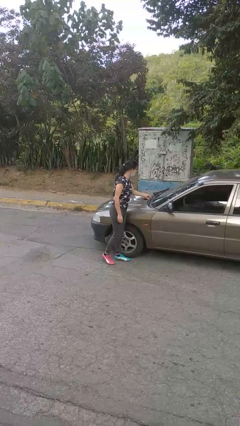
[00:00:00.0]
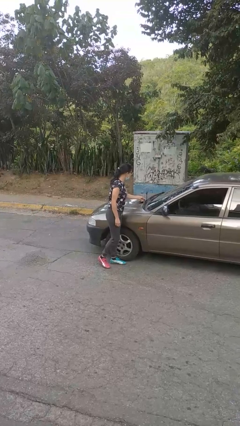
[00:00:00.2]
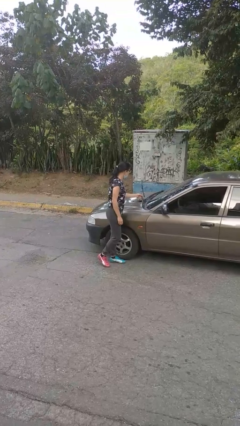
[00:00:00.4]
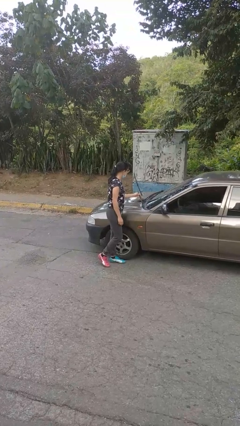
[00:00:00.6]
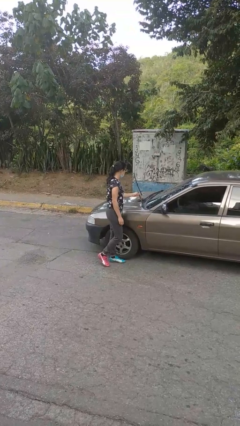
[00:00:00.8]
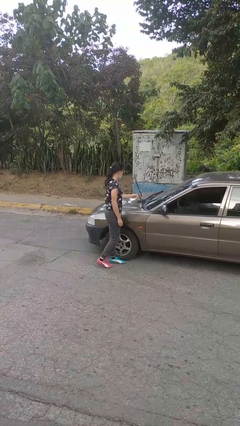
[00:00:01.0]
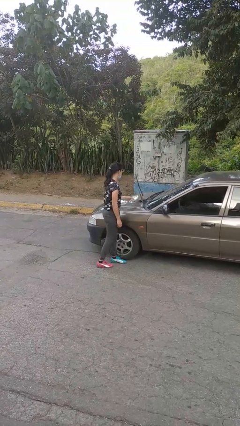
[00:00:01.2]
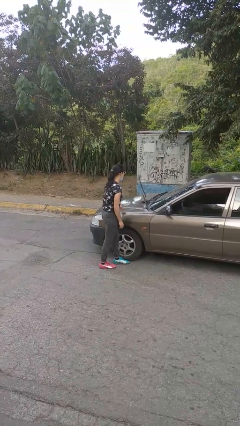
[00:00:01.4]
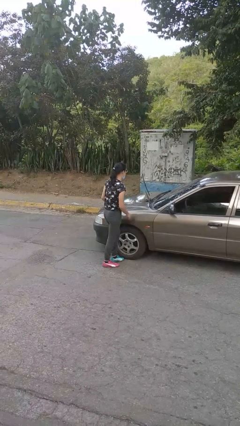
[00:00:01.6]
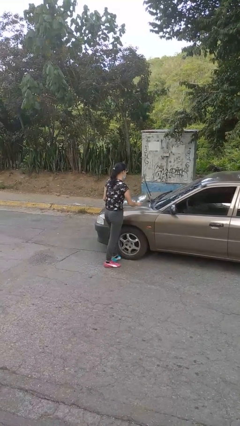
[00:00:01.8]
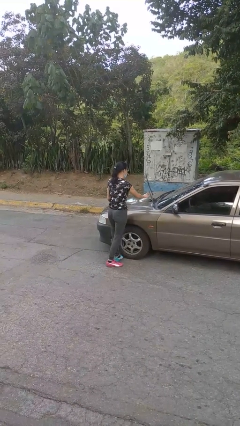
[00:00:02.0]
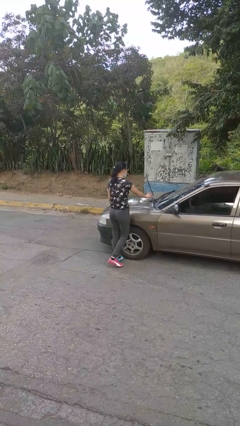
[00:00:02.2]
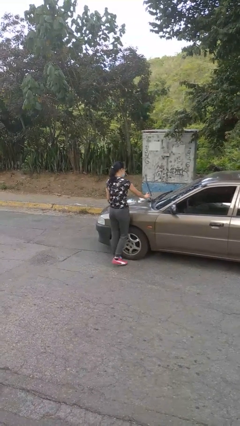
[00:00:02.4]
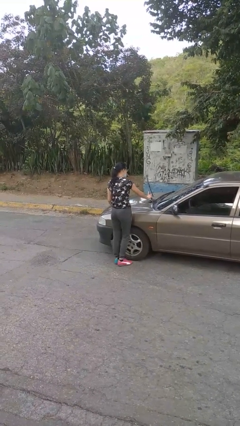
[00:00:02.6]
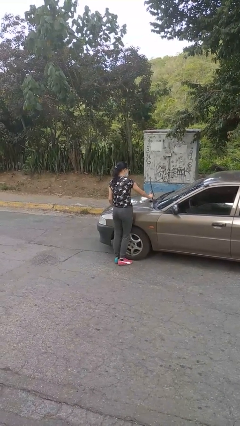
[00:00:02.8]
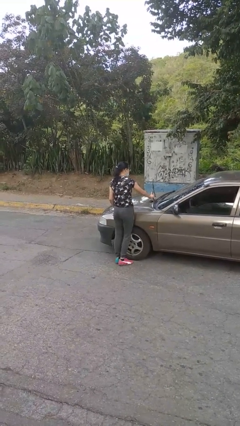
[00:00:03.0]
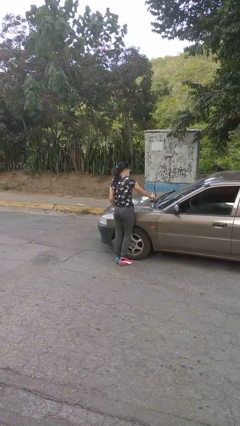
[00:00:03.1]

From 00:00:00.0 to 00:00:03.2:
person flips up car wipers

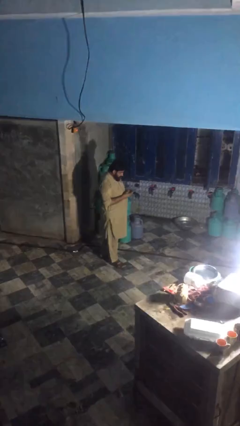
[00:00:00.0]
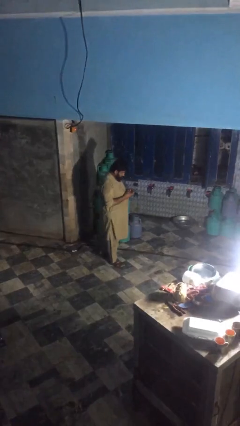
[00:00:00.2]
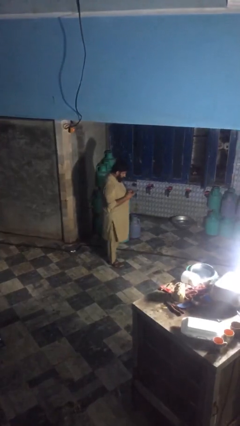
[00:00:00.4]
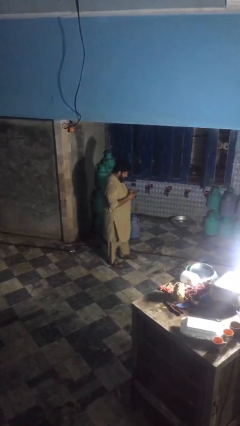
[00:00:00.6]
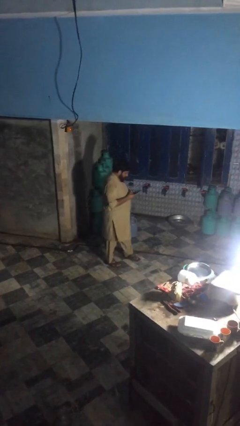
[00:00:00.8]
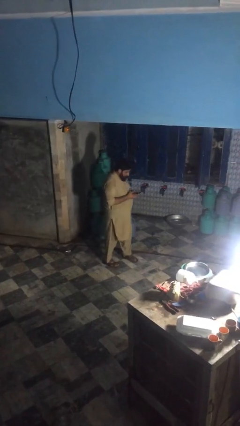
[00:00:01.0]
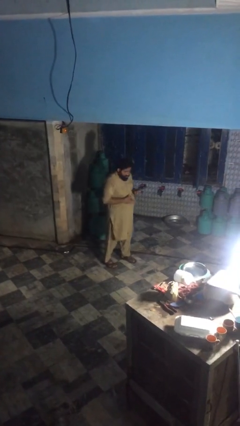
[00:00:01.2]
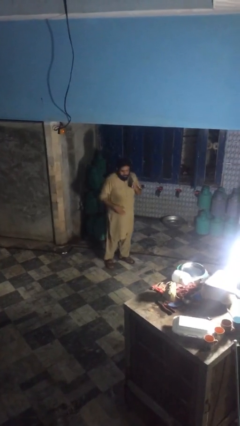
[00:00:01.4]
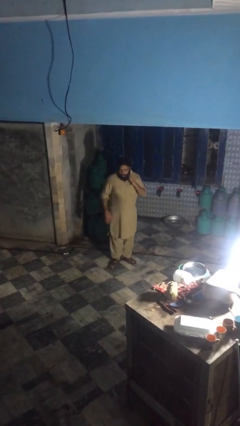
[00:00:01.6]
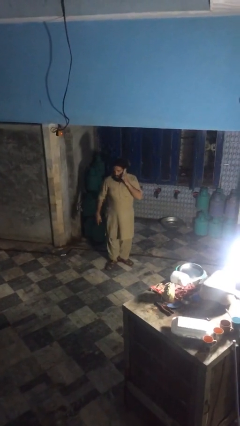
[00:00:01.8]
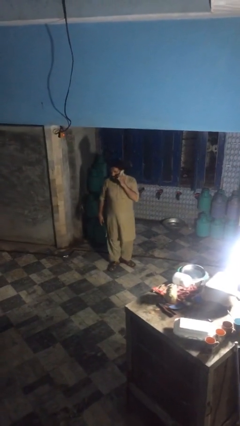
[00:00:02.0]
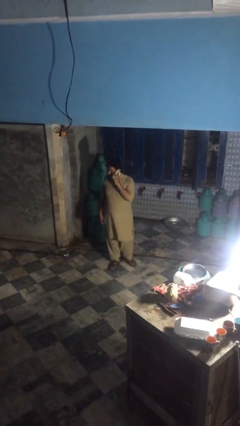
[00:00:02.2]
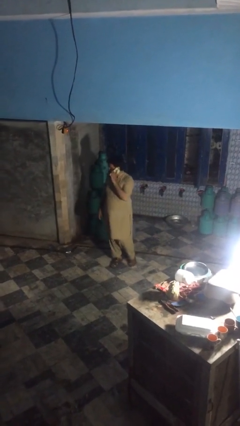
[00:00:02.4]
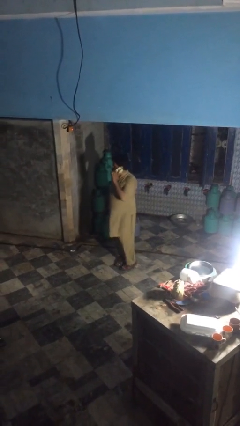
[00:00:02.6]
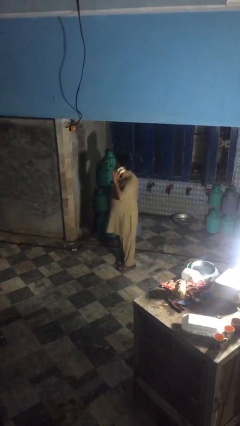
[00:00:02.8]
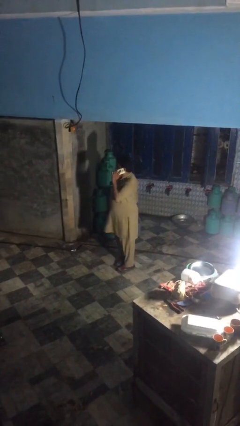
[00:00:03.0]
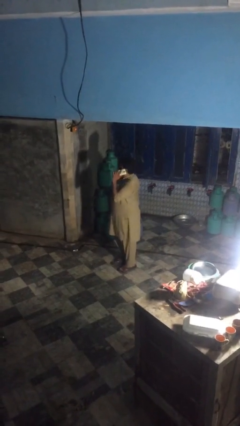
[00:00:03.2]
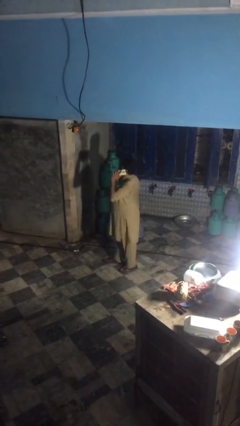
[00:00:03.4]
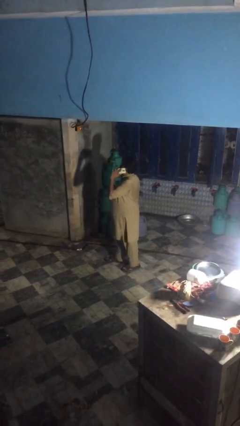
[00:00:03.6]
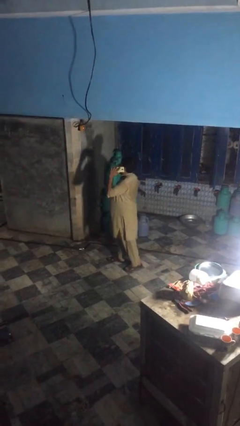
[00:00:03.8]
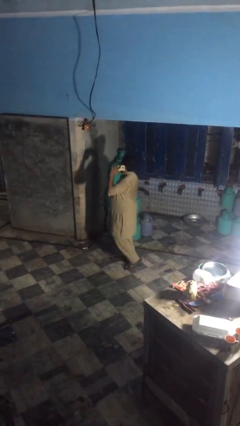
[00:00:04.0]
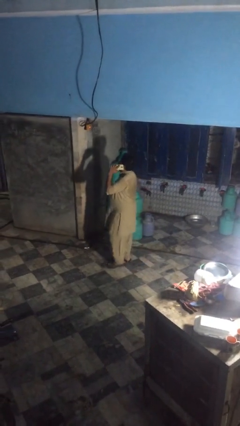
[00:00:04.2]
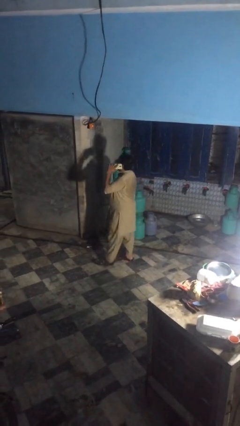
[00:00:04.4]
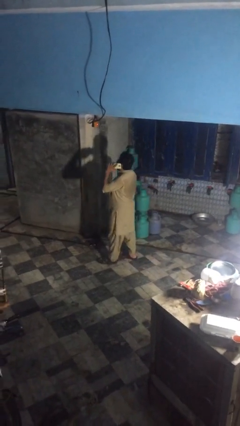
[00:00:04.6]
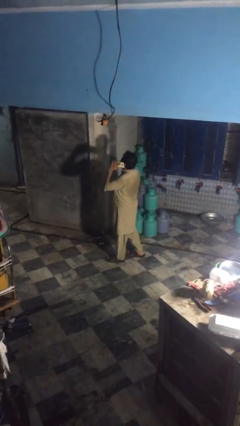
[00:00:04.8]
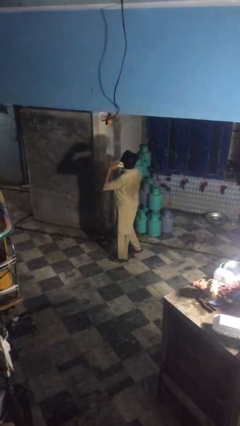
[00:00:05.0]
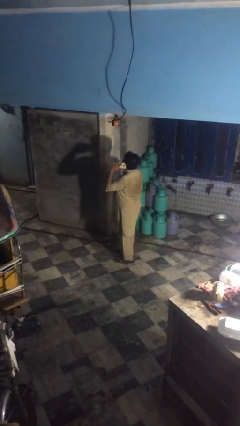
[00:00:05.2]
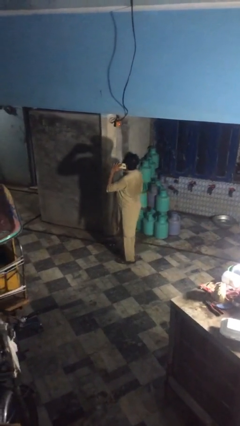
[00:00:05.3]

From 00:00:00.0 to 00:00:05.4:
person talks on phone

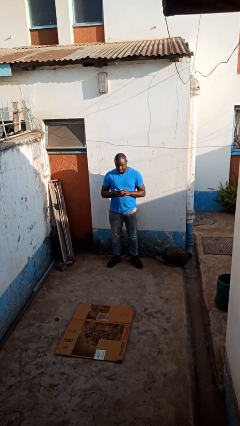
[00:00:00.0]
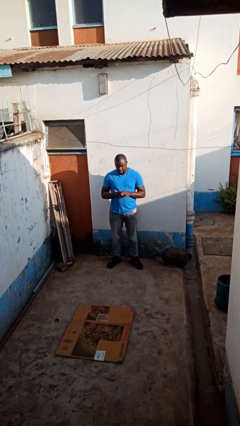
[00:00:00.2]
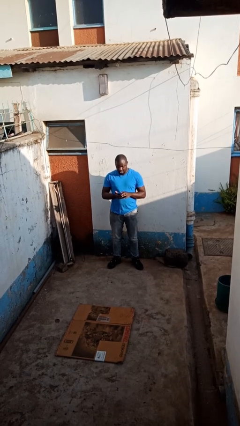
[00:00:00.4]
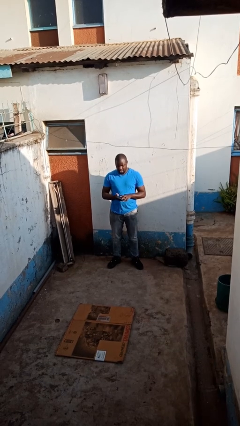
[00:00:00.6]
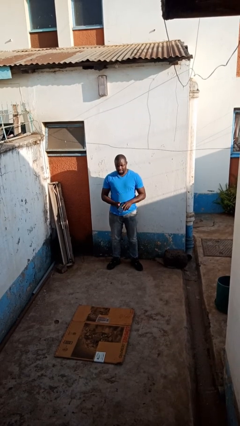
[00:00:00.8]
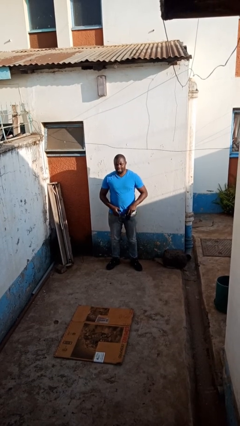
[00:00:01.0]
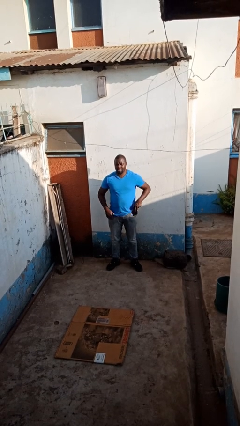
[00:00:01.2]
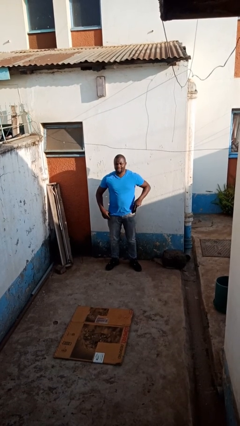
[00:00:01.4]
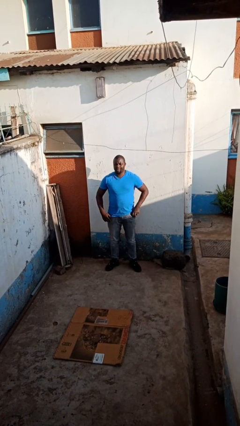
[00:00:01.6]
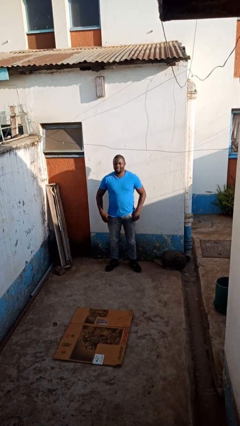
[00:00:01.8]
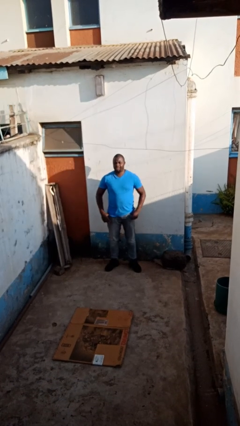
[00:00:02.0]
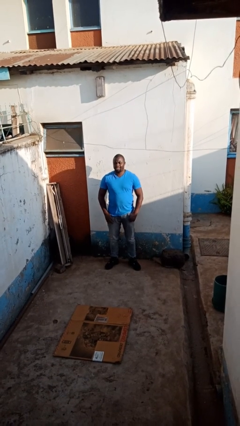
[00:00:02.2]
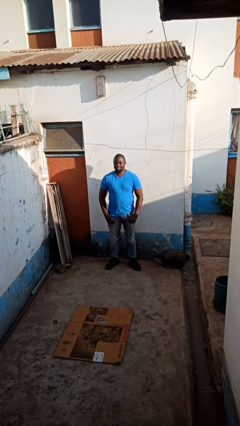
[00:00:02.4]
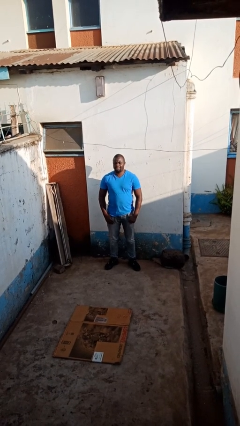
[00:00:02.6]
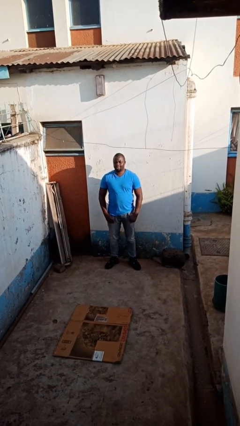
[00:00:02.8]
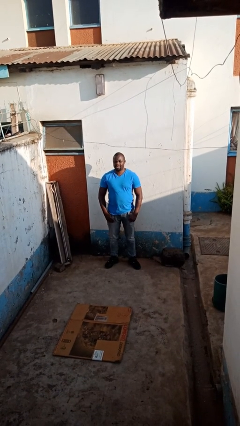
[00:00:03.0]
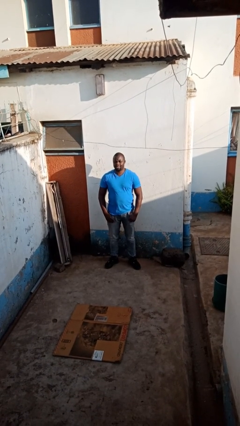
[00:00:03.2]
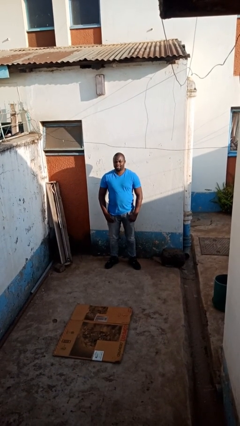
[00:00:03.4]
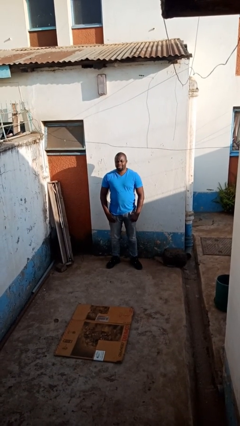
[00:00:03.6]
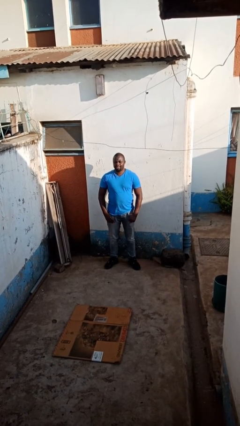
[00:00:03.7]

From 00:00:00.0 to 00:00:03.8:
person puts phone into pocket

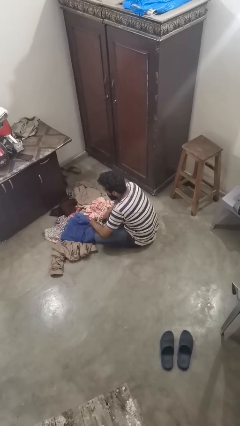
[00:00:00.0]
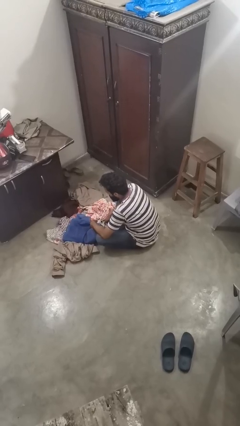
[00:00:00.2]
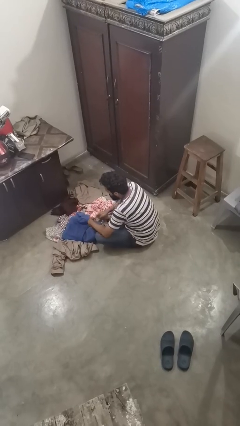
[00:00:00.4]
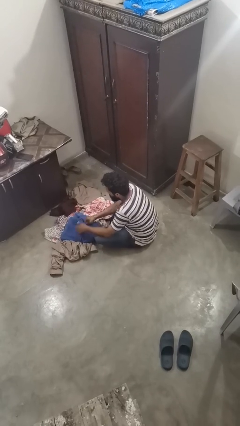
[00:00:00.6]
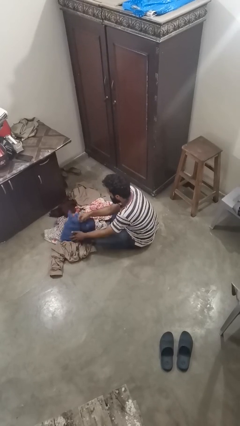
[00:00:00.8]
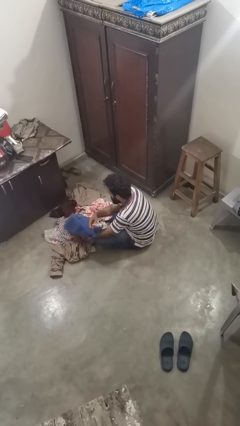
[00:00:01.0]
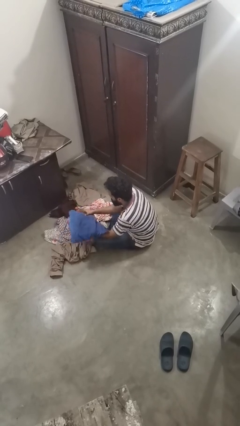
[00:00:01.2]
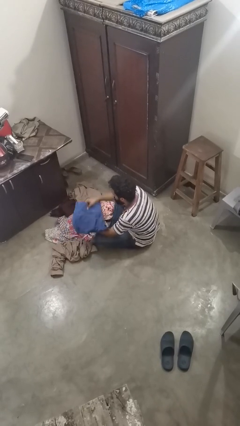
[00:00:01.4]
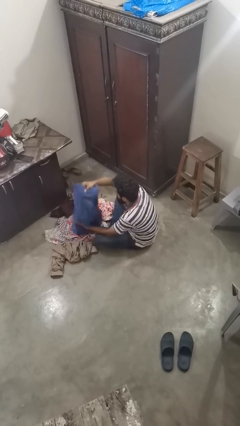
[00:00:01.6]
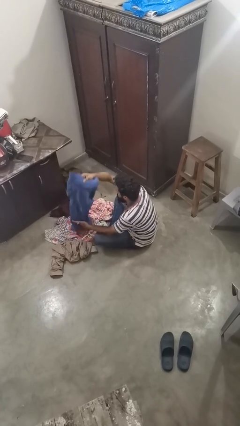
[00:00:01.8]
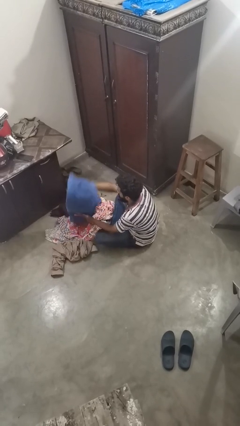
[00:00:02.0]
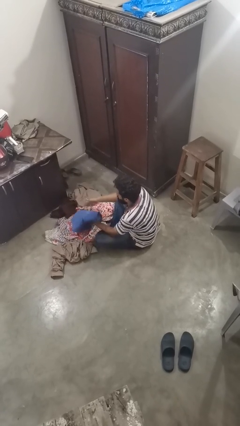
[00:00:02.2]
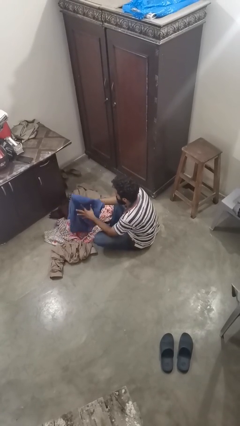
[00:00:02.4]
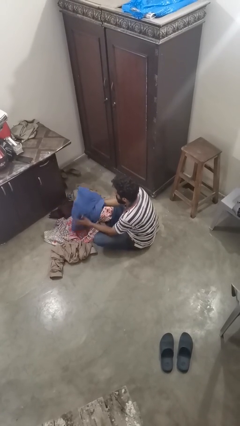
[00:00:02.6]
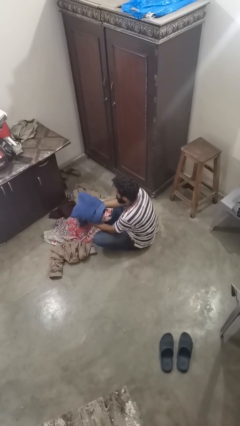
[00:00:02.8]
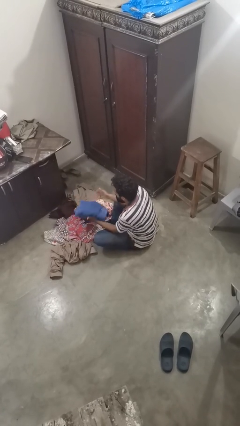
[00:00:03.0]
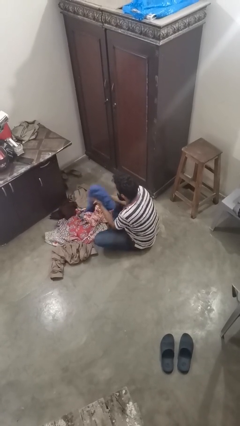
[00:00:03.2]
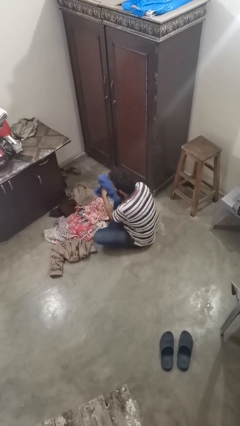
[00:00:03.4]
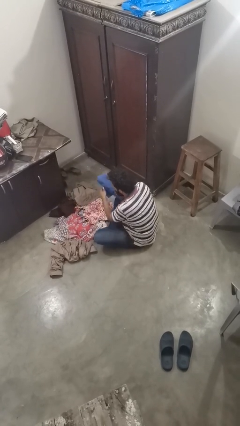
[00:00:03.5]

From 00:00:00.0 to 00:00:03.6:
person folds pants

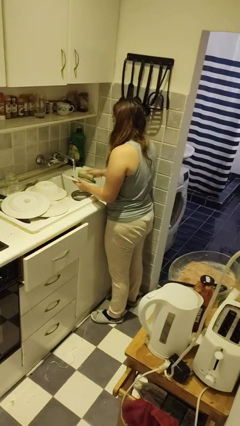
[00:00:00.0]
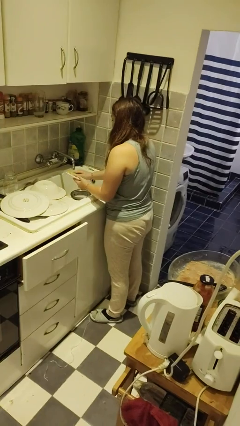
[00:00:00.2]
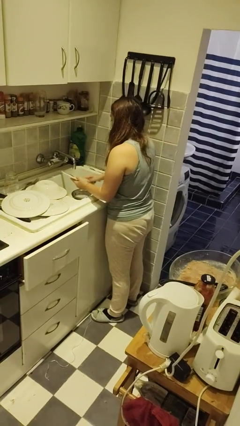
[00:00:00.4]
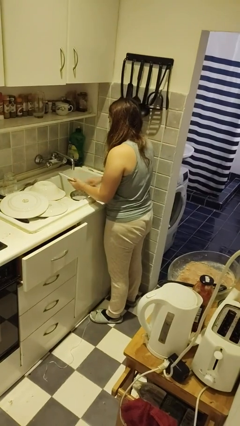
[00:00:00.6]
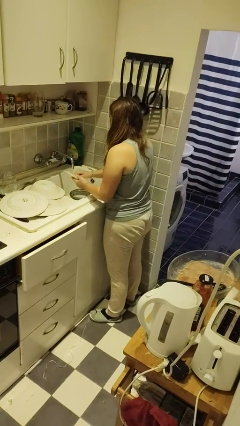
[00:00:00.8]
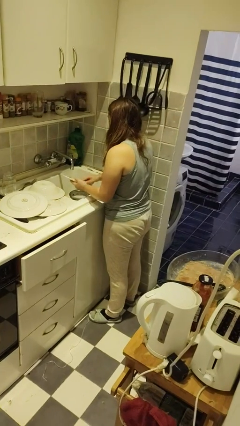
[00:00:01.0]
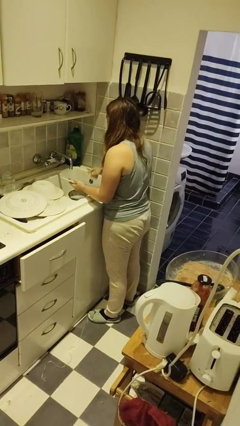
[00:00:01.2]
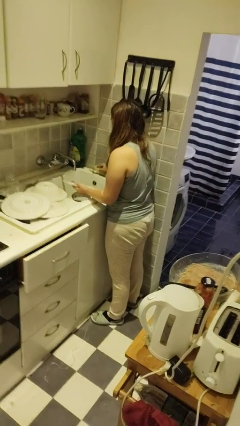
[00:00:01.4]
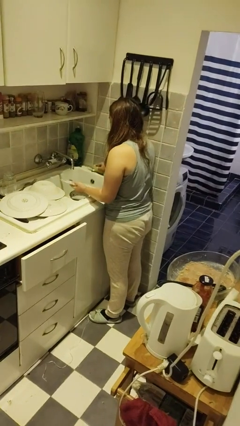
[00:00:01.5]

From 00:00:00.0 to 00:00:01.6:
person washes dish
